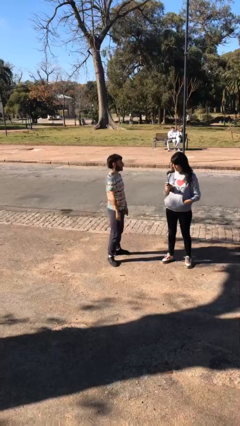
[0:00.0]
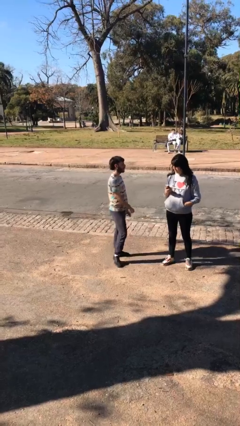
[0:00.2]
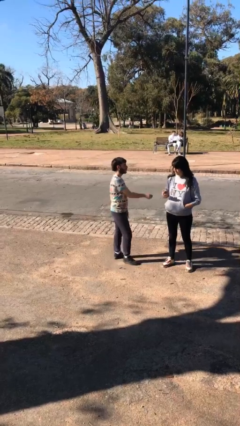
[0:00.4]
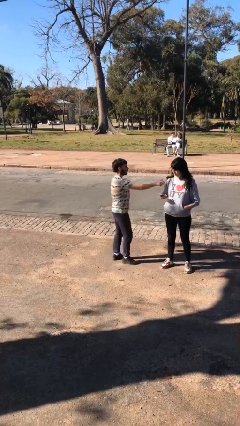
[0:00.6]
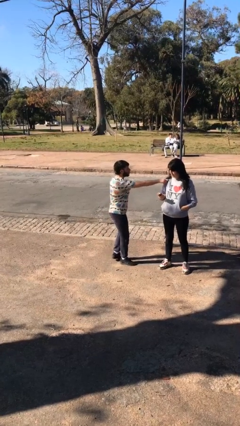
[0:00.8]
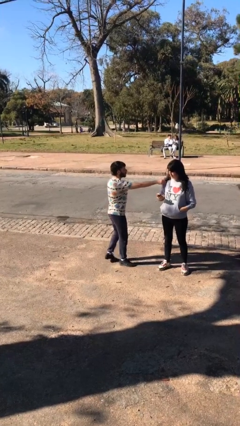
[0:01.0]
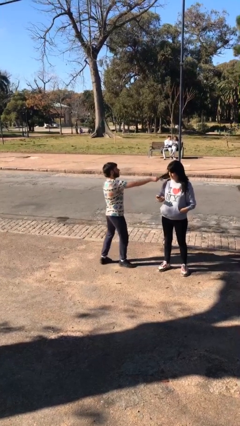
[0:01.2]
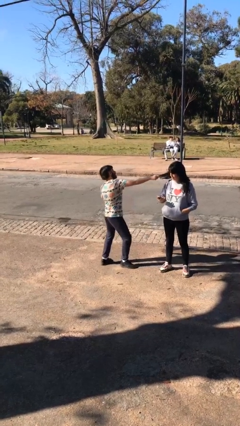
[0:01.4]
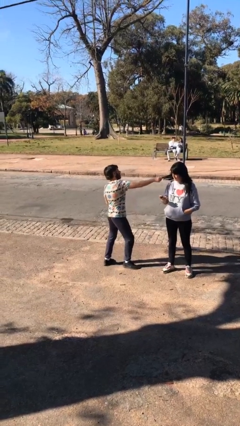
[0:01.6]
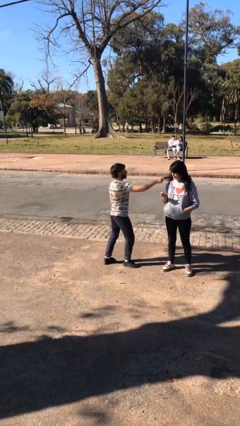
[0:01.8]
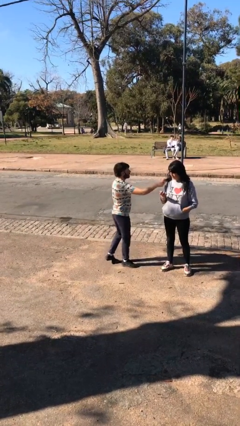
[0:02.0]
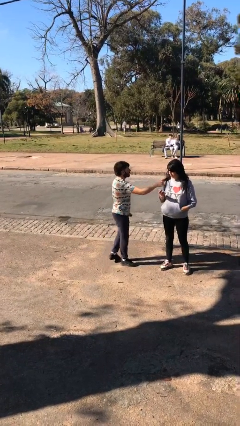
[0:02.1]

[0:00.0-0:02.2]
person grabs person by hair

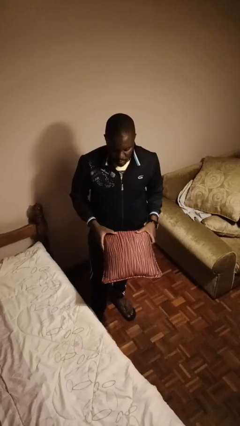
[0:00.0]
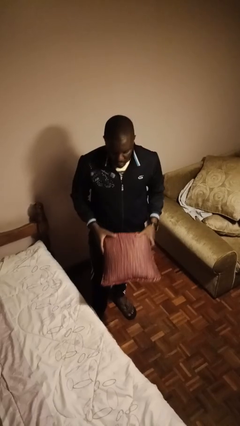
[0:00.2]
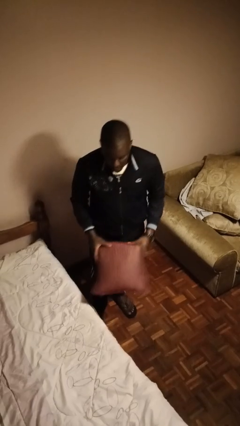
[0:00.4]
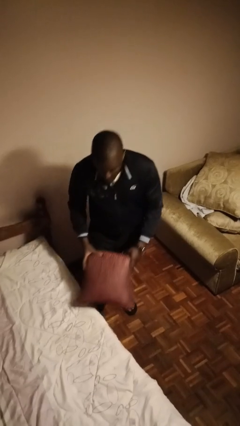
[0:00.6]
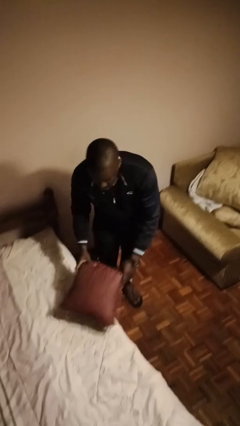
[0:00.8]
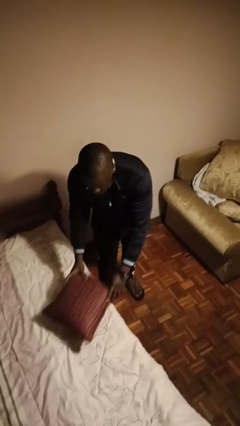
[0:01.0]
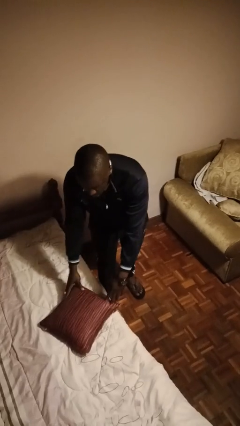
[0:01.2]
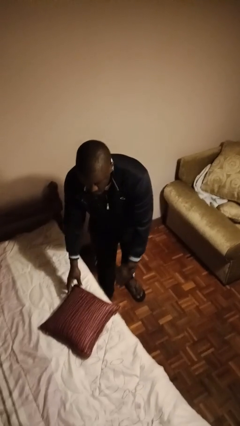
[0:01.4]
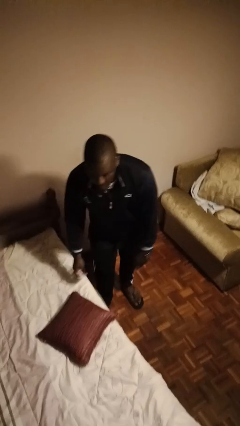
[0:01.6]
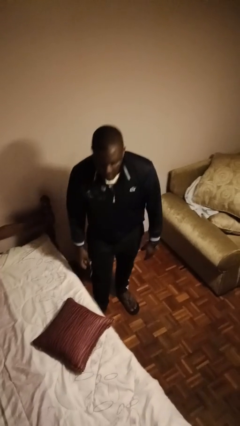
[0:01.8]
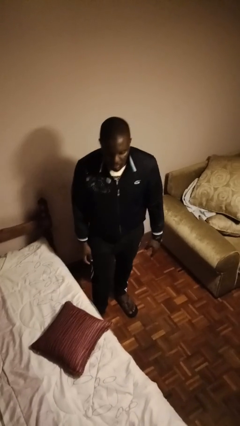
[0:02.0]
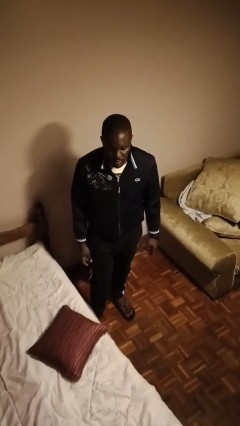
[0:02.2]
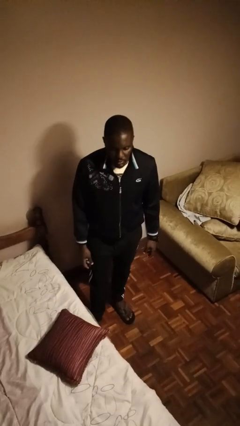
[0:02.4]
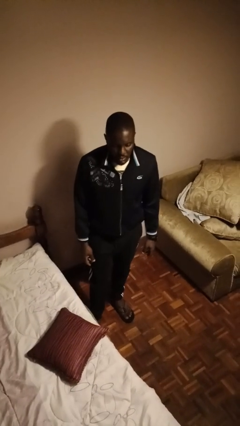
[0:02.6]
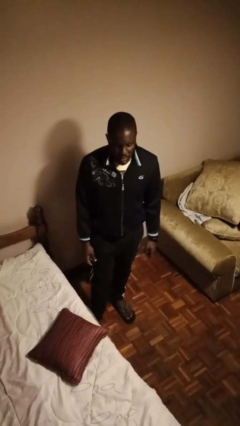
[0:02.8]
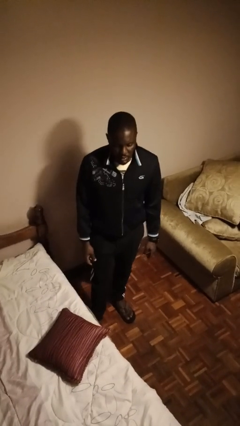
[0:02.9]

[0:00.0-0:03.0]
person puts down object on bed

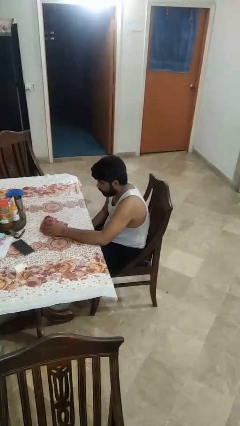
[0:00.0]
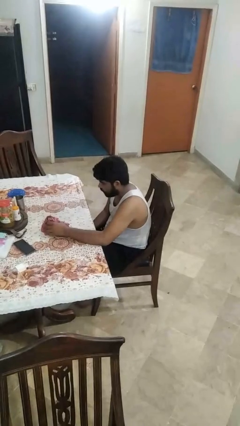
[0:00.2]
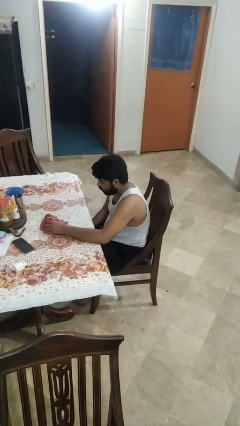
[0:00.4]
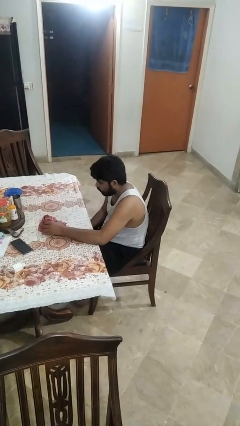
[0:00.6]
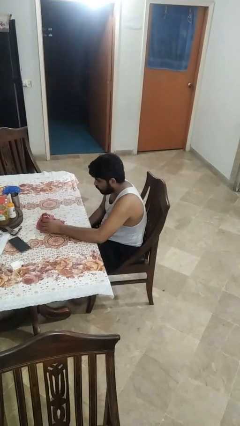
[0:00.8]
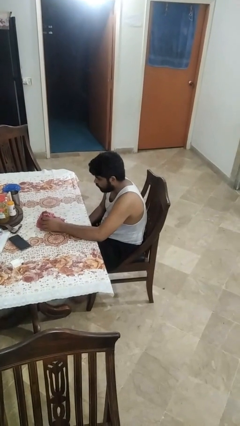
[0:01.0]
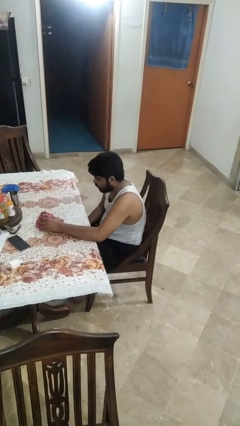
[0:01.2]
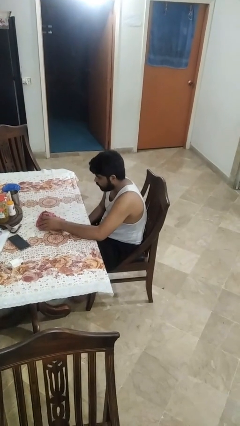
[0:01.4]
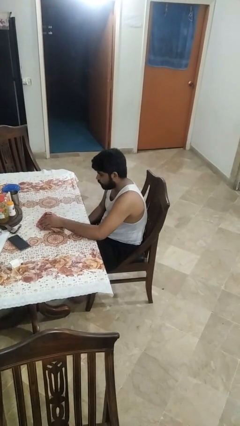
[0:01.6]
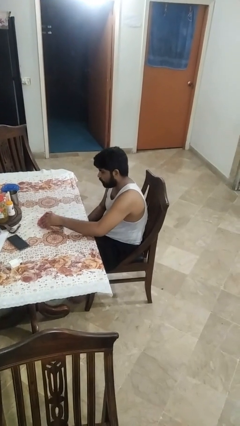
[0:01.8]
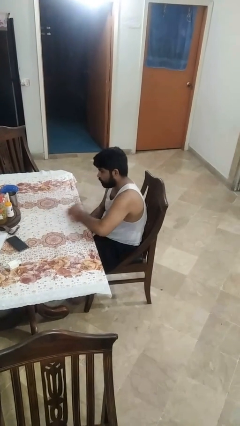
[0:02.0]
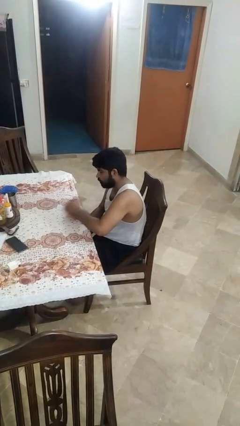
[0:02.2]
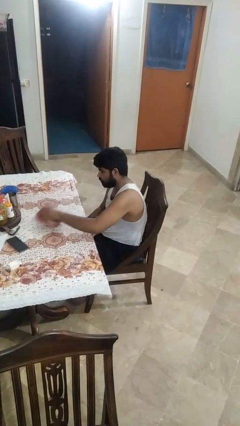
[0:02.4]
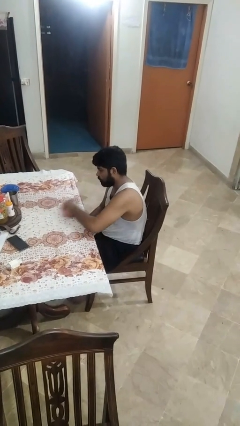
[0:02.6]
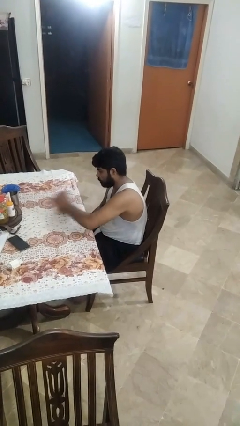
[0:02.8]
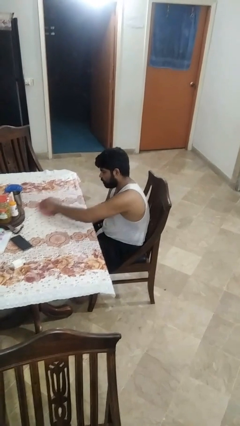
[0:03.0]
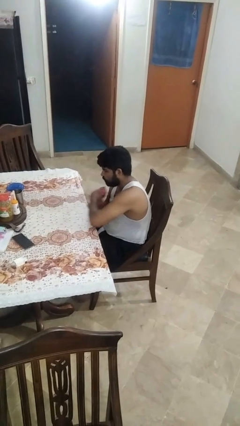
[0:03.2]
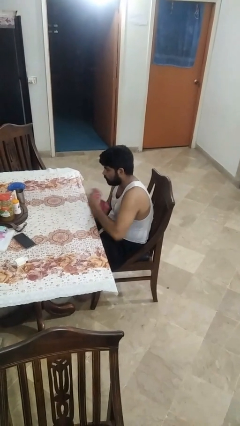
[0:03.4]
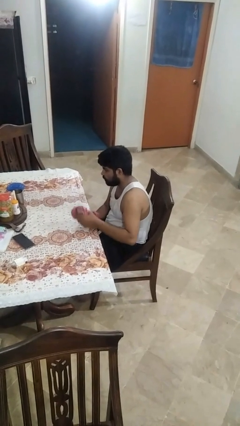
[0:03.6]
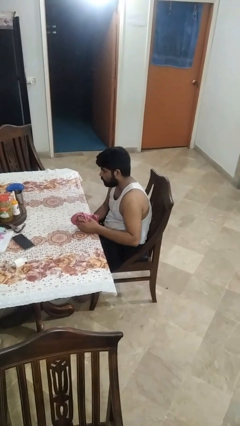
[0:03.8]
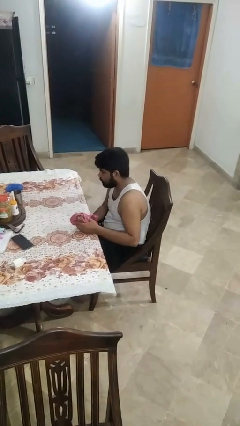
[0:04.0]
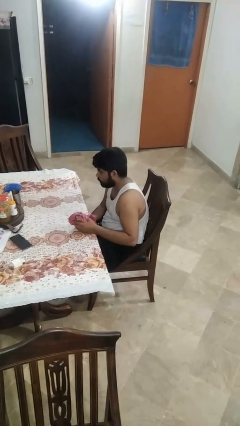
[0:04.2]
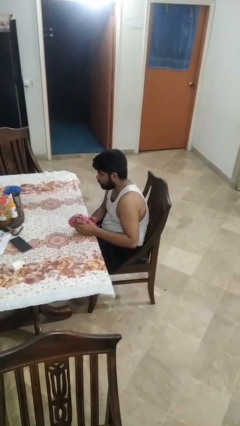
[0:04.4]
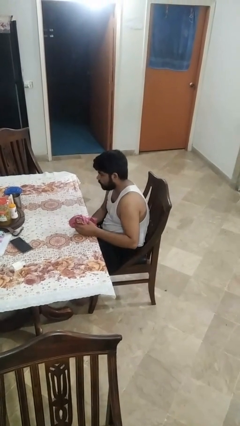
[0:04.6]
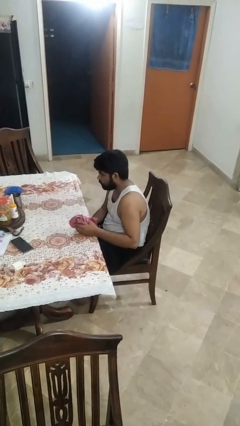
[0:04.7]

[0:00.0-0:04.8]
person cleans table with rag

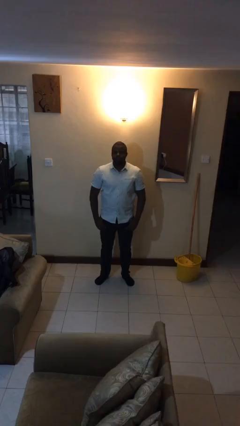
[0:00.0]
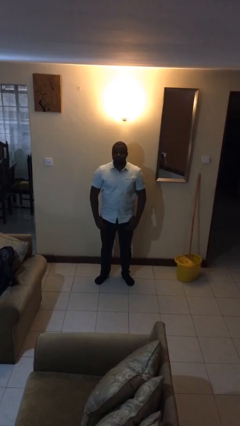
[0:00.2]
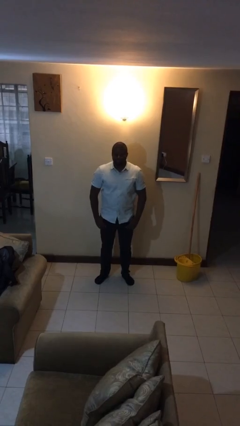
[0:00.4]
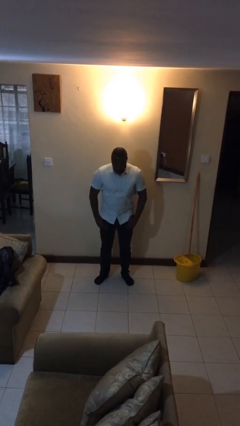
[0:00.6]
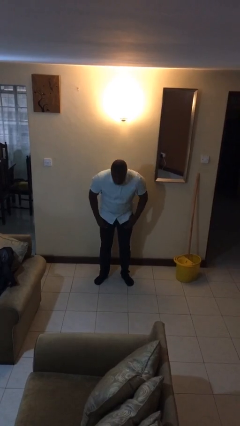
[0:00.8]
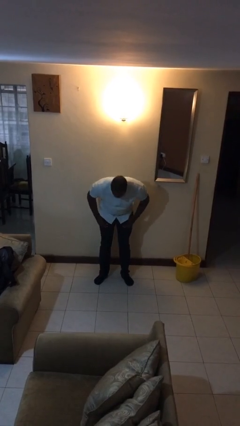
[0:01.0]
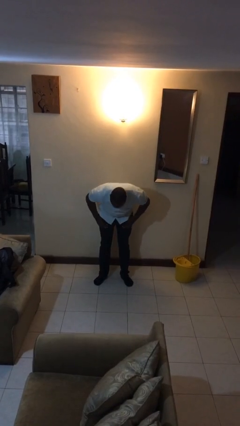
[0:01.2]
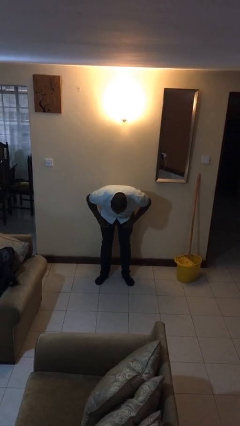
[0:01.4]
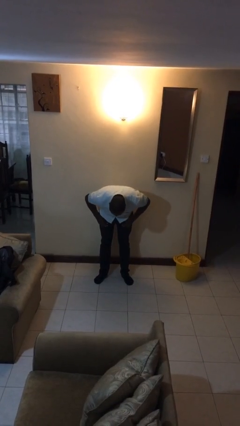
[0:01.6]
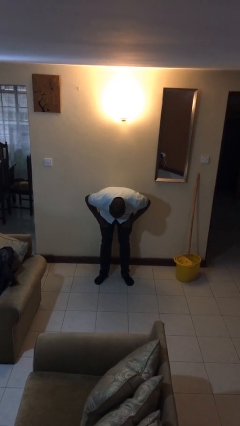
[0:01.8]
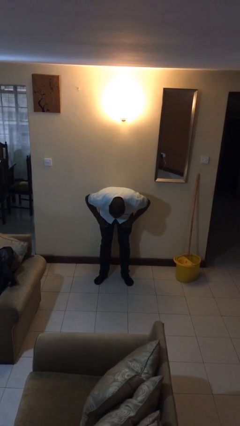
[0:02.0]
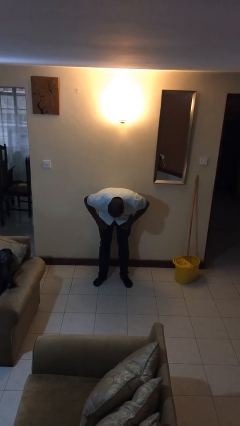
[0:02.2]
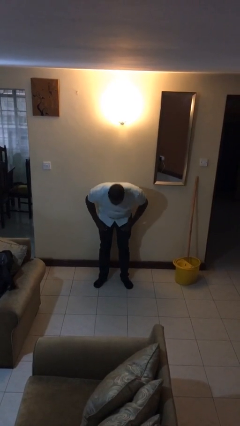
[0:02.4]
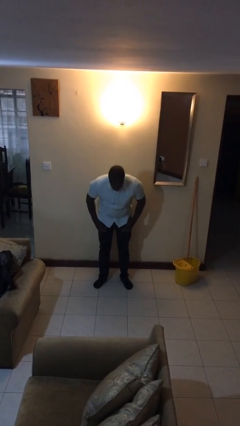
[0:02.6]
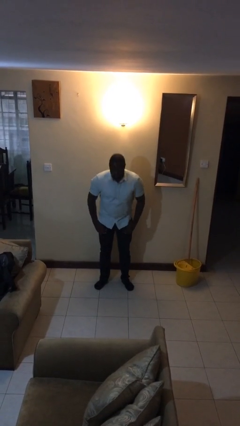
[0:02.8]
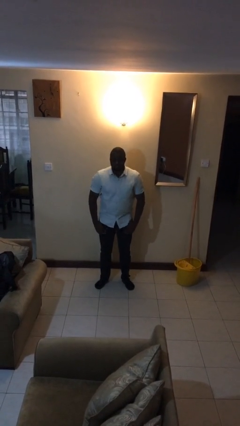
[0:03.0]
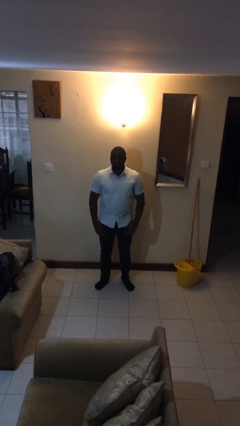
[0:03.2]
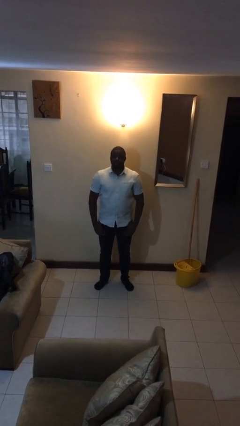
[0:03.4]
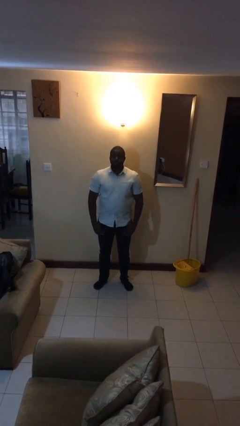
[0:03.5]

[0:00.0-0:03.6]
person bows

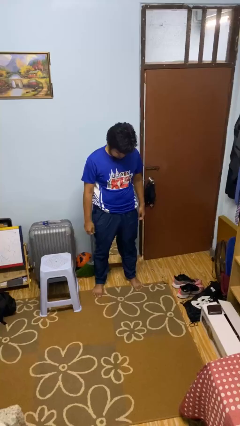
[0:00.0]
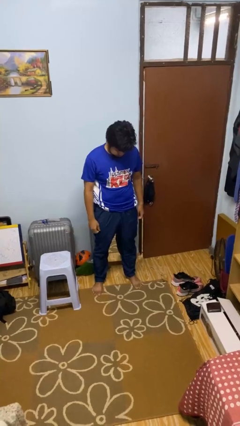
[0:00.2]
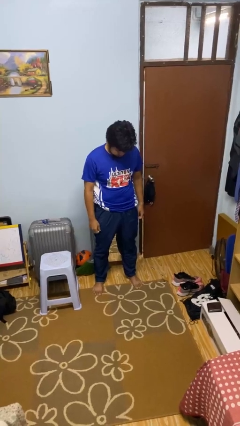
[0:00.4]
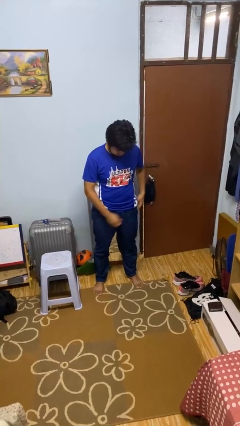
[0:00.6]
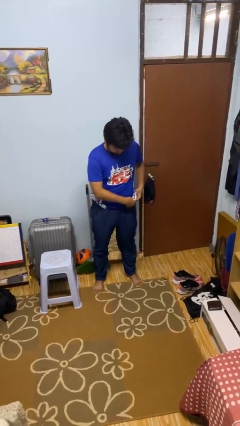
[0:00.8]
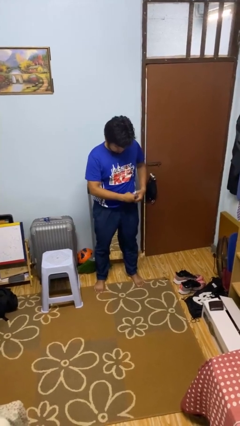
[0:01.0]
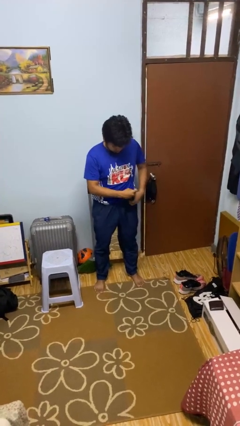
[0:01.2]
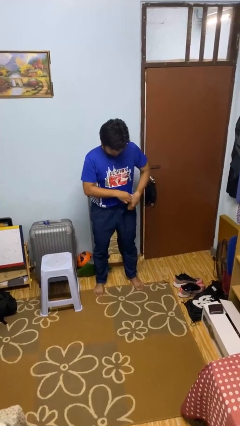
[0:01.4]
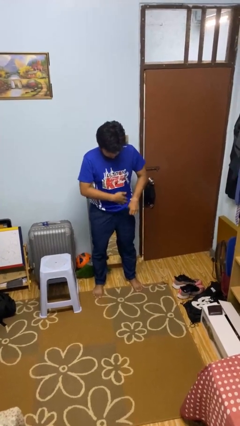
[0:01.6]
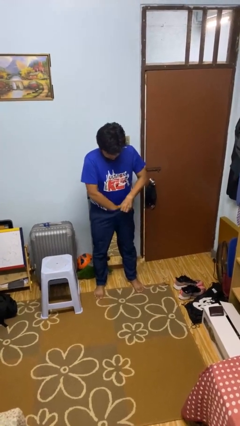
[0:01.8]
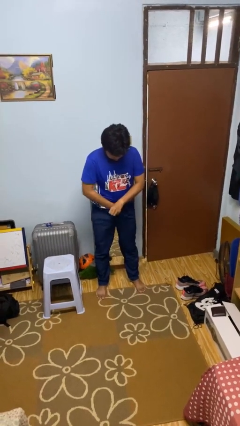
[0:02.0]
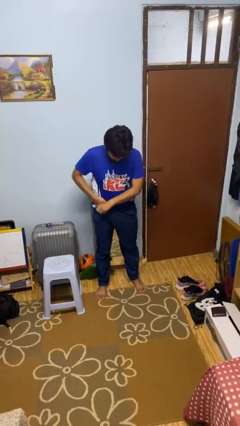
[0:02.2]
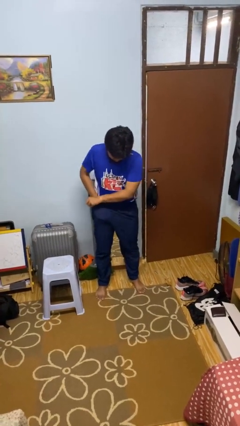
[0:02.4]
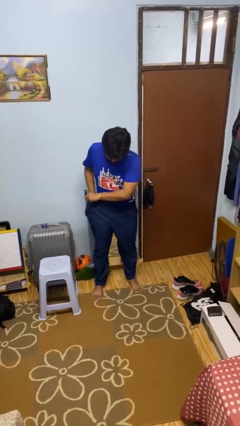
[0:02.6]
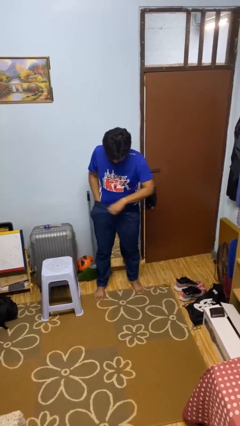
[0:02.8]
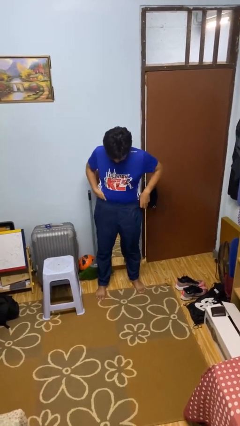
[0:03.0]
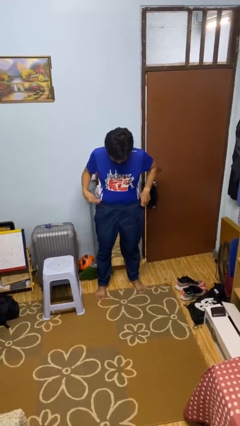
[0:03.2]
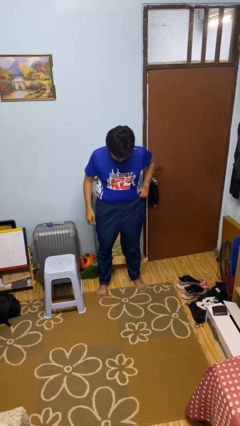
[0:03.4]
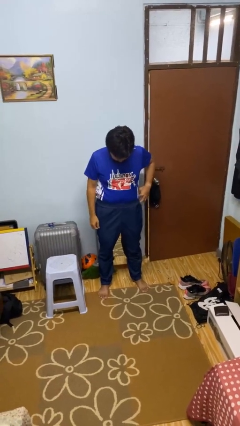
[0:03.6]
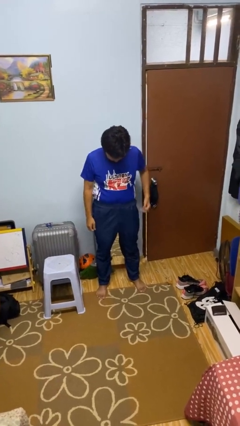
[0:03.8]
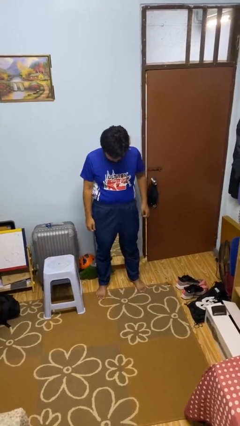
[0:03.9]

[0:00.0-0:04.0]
person tucks in shirt
